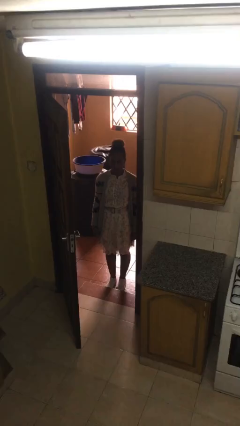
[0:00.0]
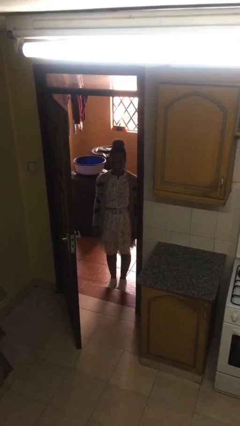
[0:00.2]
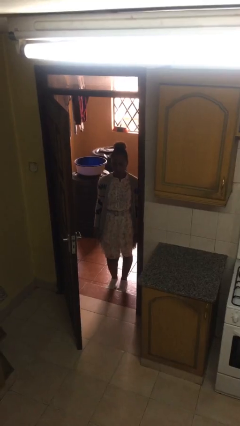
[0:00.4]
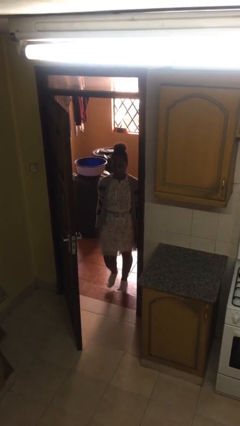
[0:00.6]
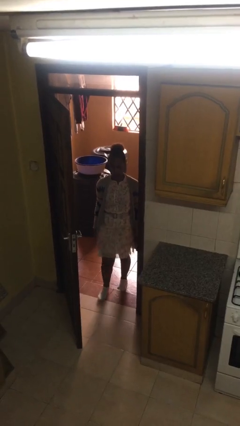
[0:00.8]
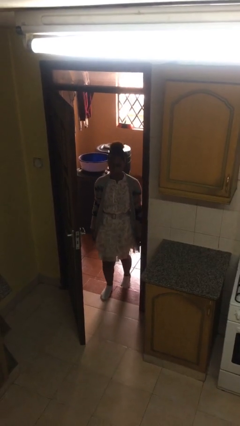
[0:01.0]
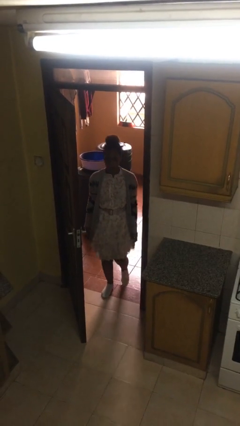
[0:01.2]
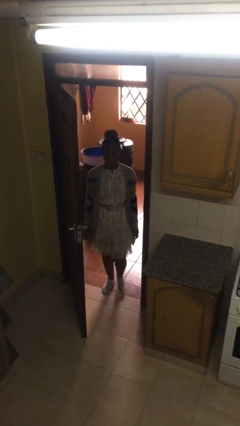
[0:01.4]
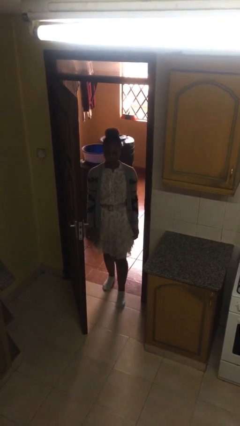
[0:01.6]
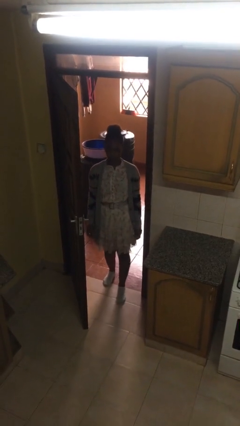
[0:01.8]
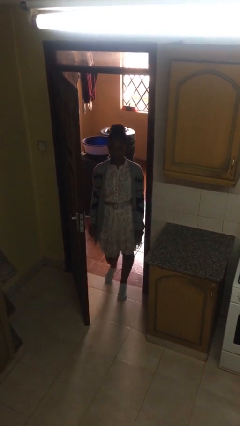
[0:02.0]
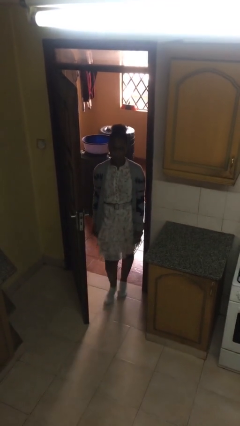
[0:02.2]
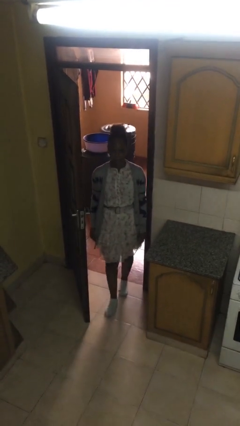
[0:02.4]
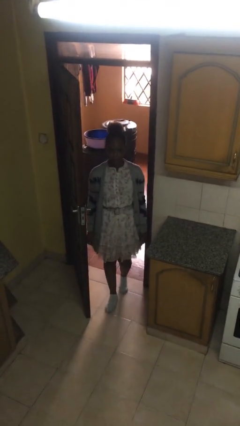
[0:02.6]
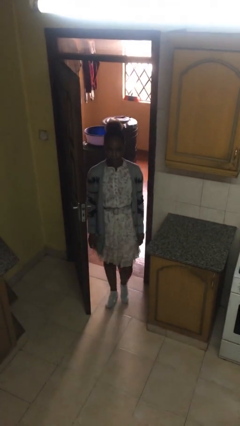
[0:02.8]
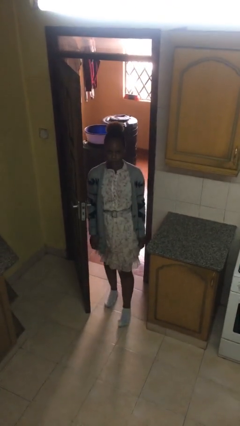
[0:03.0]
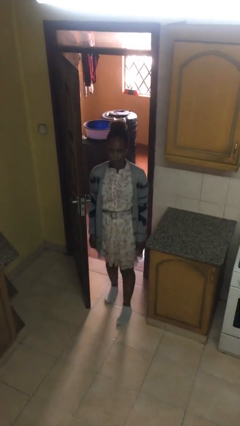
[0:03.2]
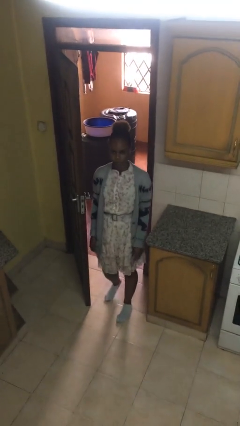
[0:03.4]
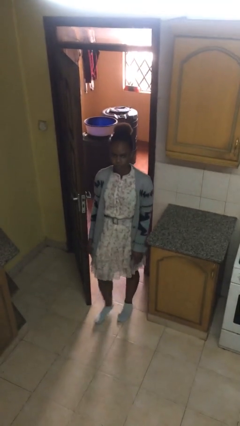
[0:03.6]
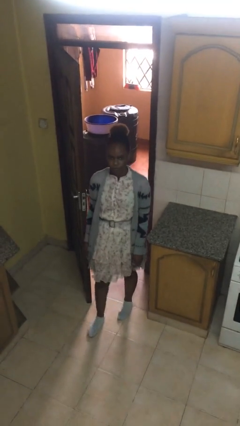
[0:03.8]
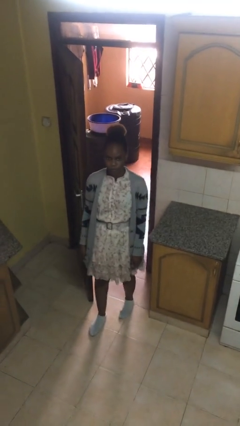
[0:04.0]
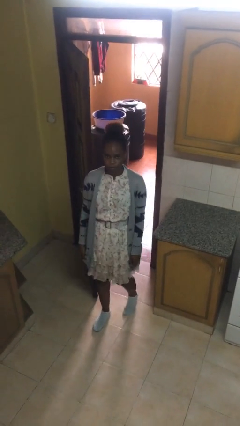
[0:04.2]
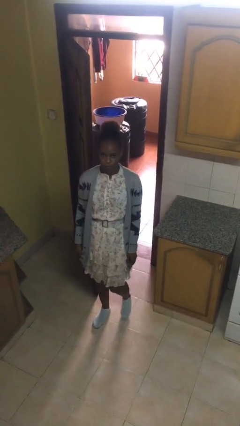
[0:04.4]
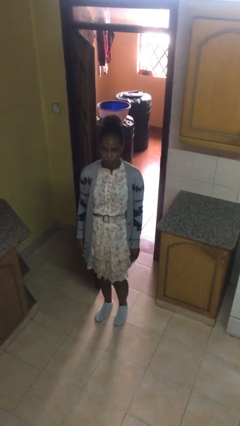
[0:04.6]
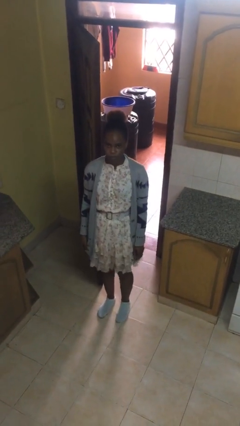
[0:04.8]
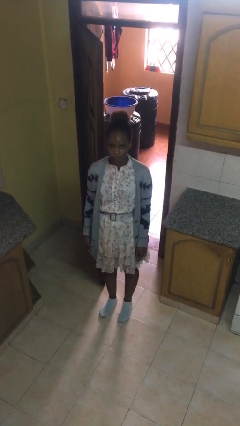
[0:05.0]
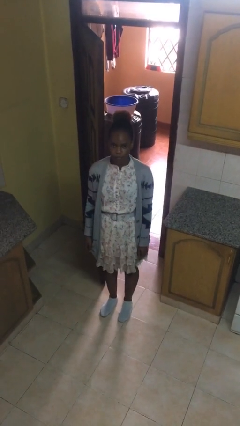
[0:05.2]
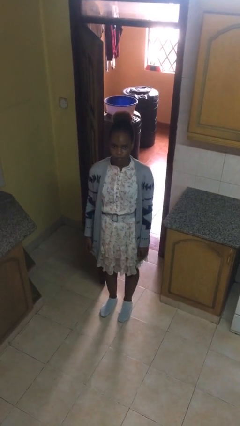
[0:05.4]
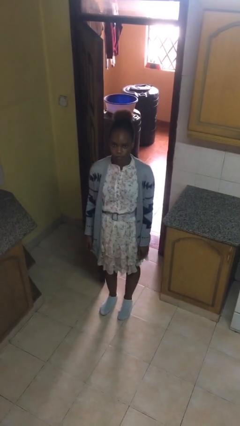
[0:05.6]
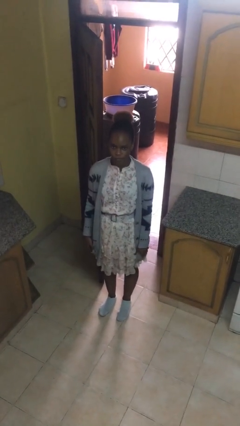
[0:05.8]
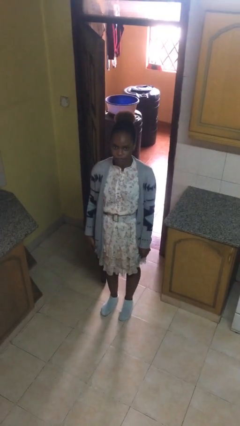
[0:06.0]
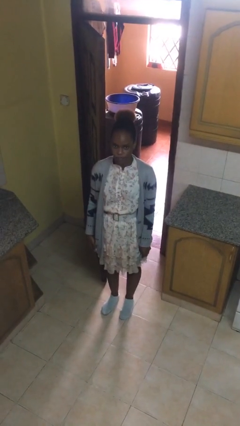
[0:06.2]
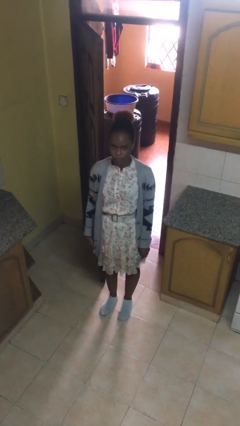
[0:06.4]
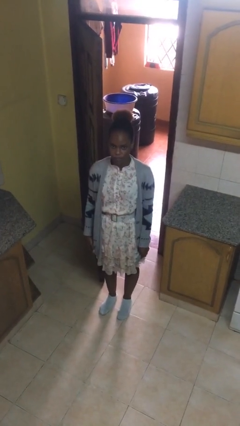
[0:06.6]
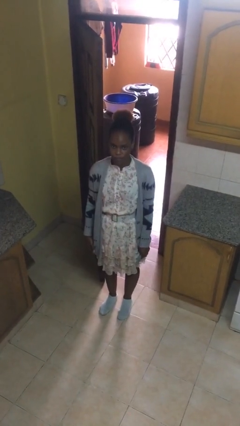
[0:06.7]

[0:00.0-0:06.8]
person enters scene through structure

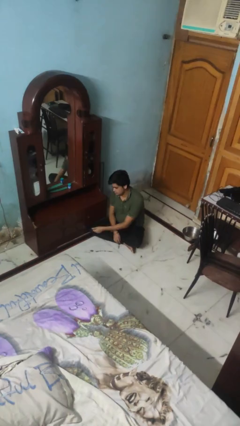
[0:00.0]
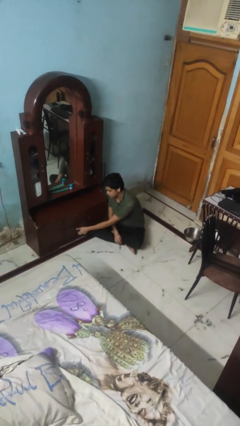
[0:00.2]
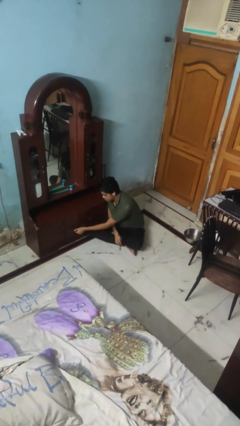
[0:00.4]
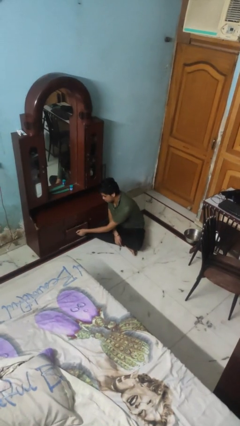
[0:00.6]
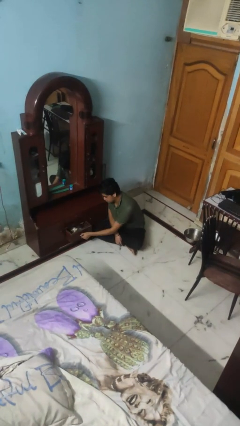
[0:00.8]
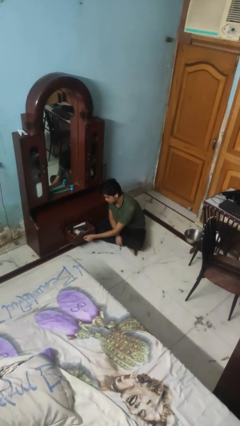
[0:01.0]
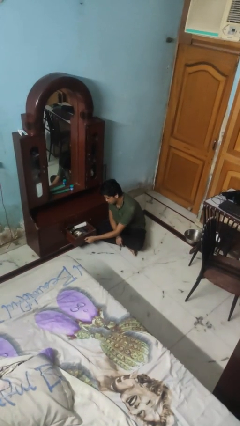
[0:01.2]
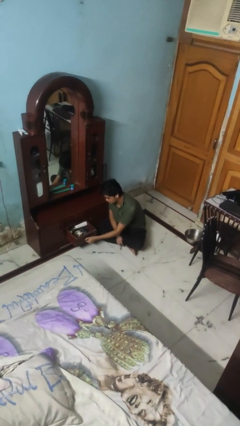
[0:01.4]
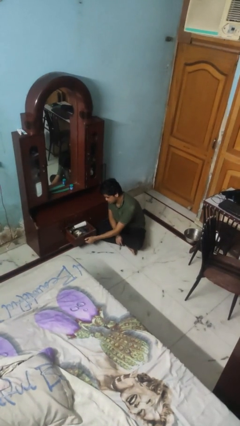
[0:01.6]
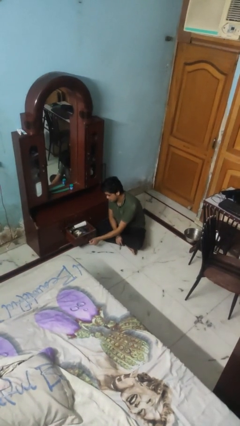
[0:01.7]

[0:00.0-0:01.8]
person opens dresser drawer

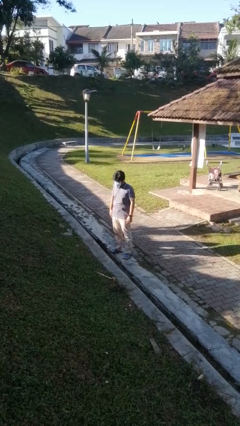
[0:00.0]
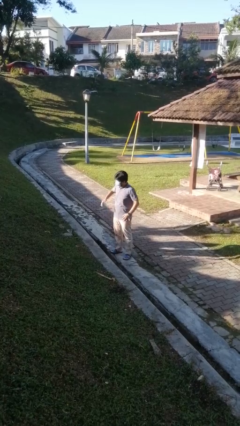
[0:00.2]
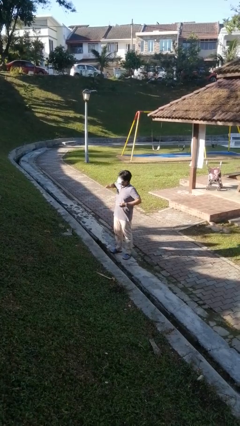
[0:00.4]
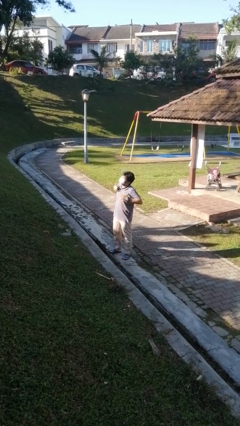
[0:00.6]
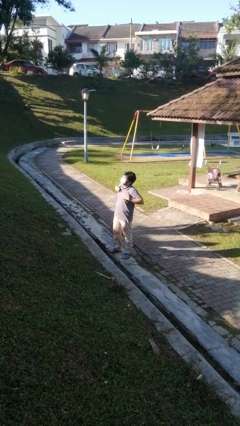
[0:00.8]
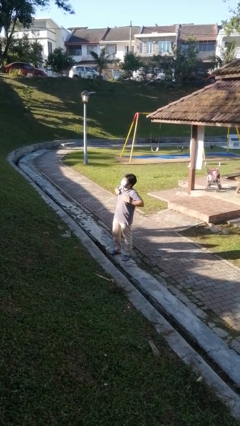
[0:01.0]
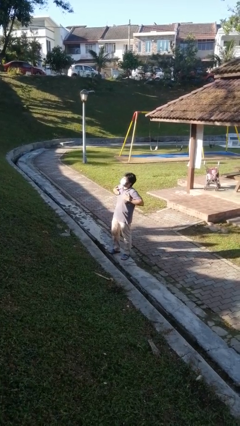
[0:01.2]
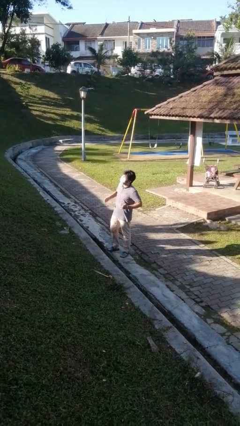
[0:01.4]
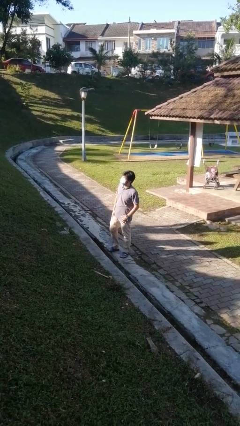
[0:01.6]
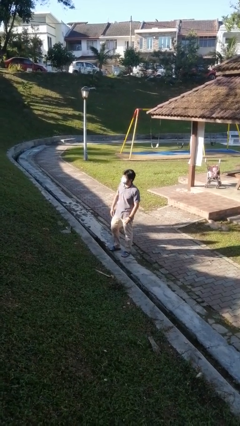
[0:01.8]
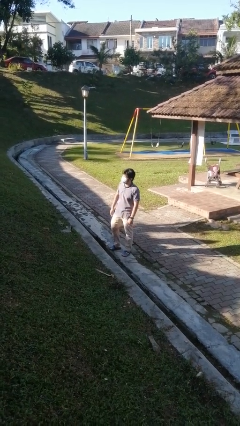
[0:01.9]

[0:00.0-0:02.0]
person drums on chest

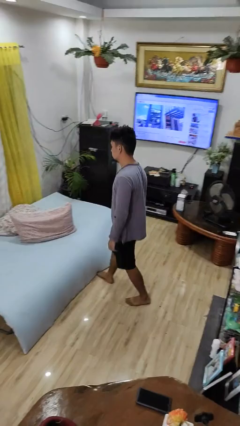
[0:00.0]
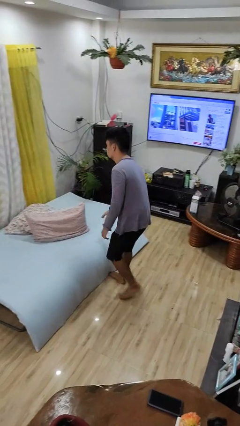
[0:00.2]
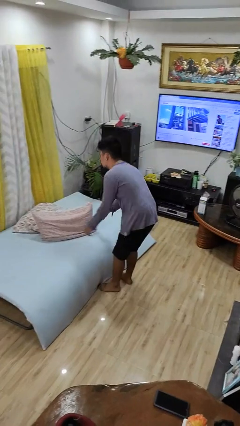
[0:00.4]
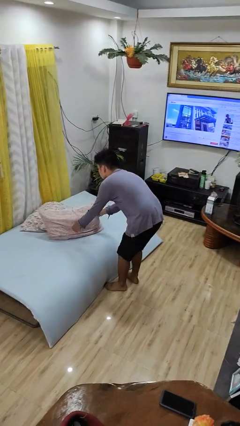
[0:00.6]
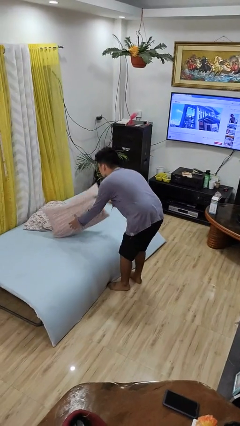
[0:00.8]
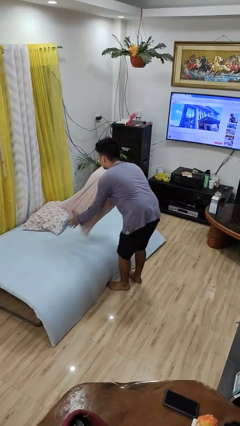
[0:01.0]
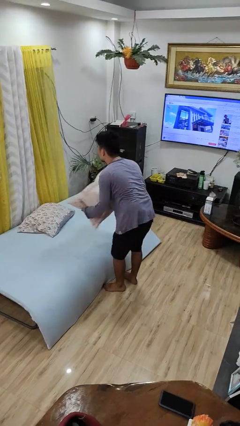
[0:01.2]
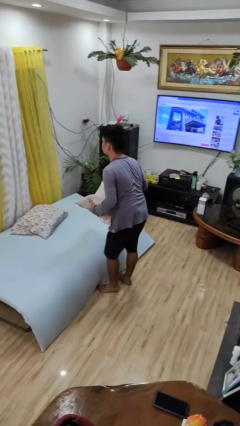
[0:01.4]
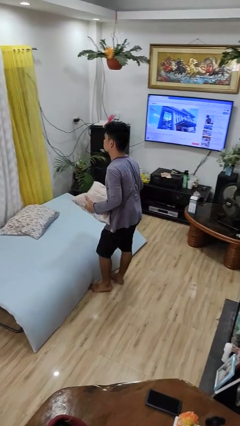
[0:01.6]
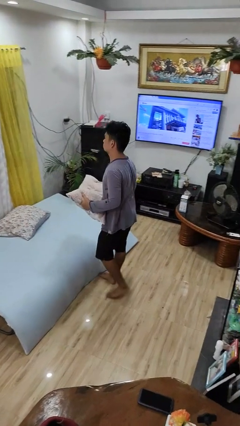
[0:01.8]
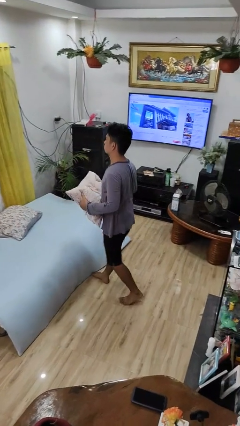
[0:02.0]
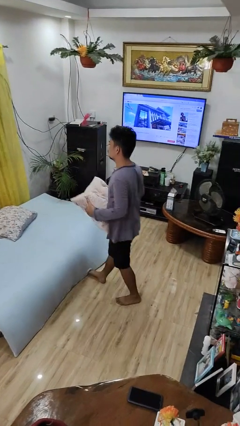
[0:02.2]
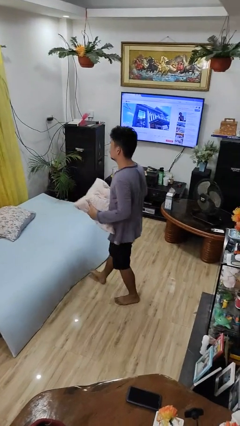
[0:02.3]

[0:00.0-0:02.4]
person picks up object from bed

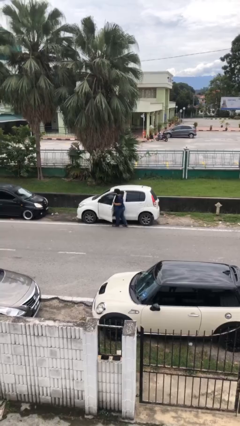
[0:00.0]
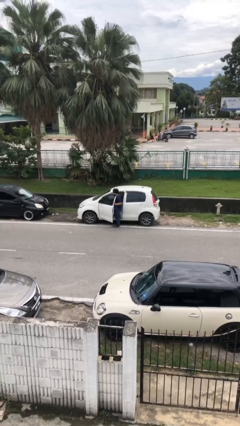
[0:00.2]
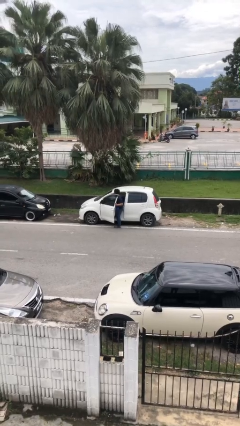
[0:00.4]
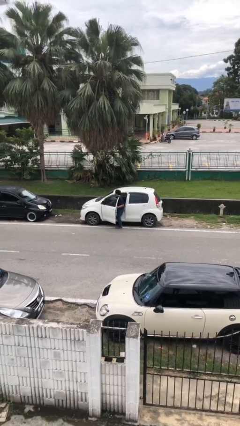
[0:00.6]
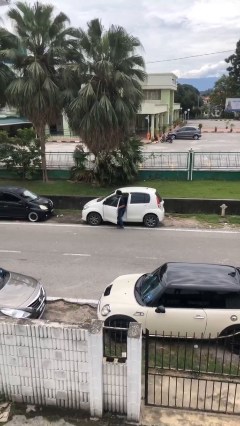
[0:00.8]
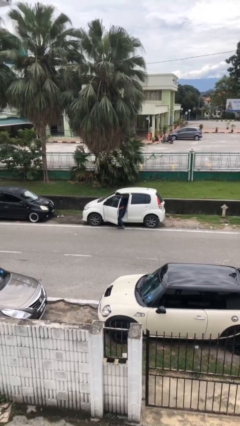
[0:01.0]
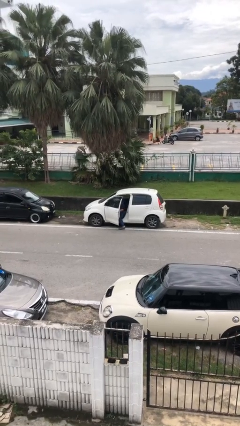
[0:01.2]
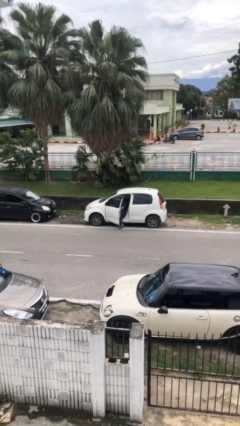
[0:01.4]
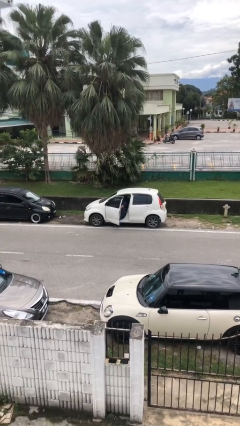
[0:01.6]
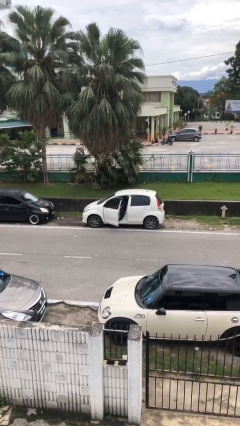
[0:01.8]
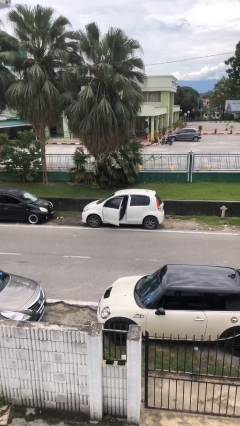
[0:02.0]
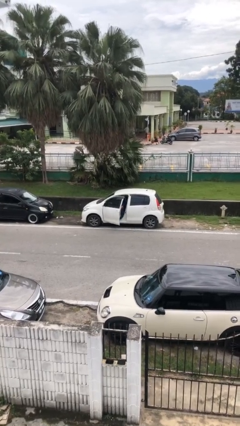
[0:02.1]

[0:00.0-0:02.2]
person enters car

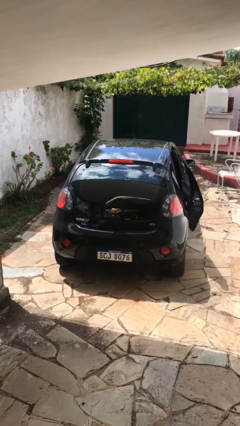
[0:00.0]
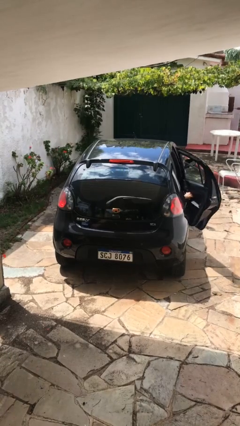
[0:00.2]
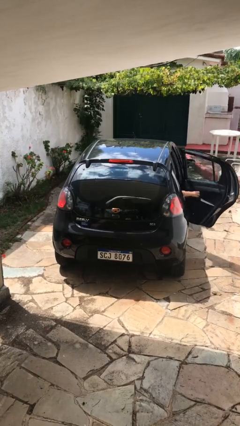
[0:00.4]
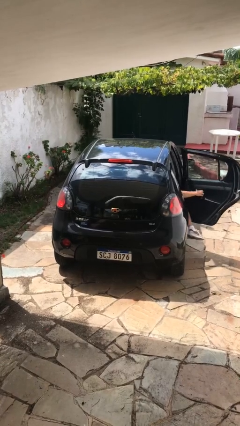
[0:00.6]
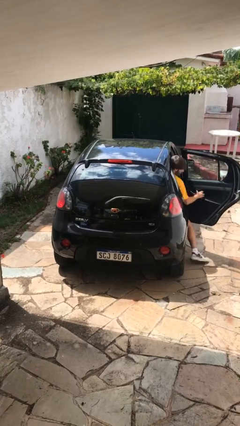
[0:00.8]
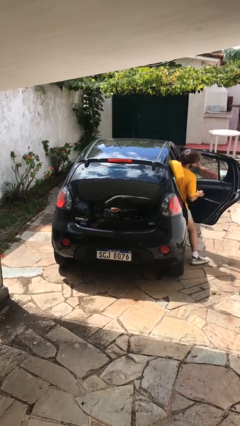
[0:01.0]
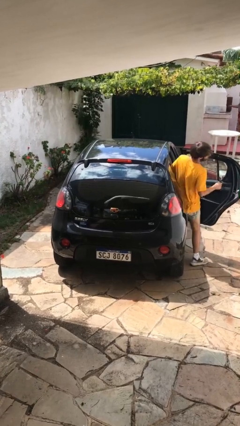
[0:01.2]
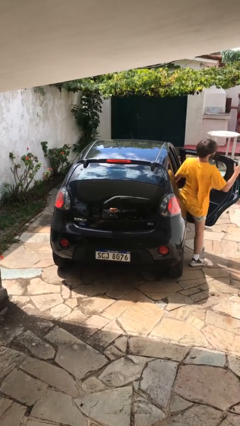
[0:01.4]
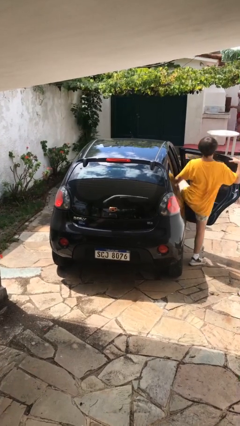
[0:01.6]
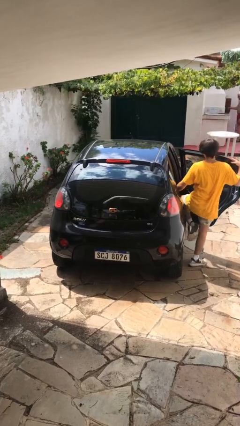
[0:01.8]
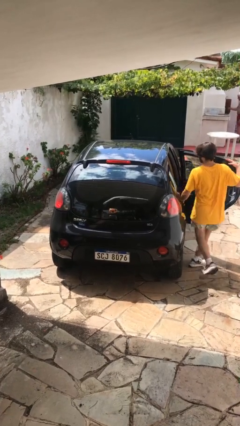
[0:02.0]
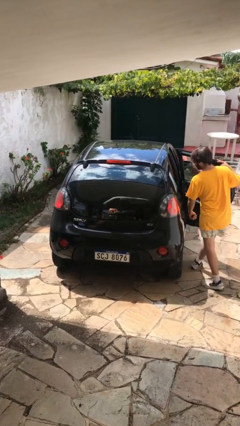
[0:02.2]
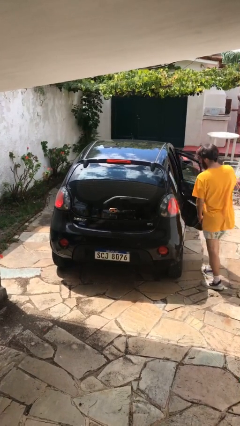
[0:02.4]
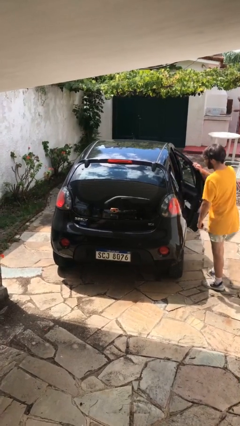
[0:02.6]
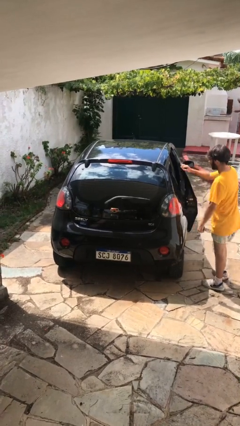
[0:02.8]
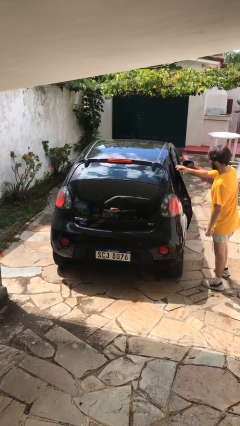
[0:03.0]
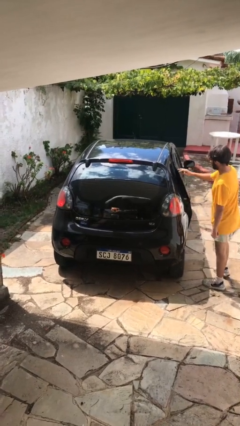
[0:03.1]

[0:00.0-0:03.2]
car drops off person
